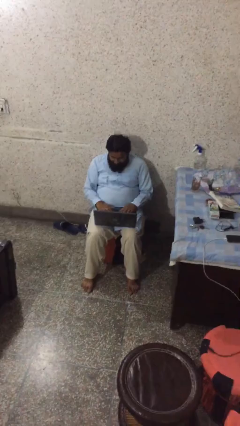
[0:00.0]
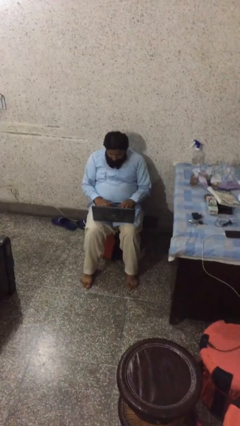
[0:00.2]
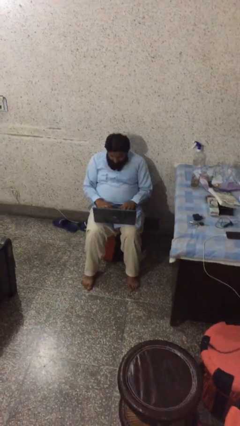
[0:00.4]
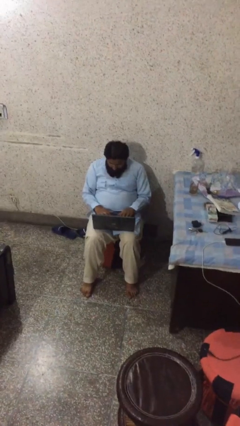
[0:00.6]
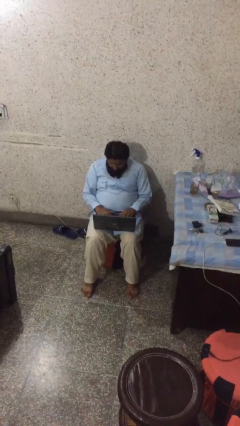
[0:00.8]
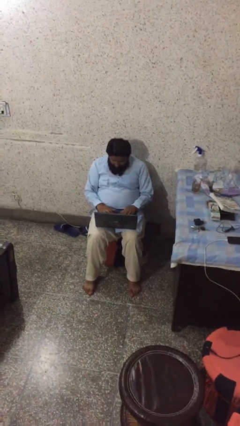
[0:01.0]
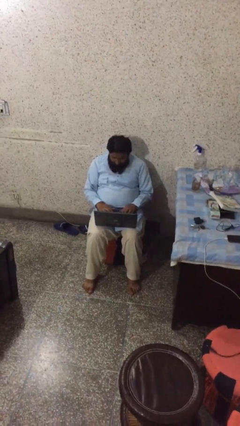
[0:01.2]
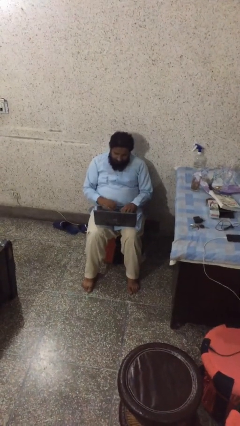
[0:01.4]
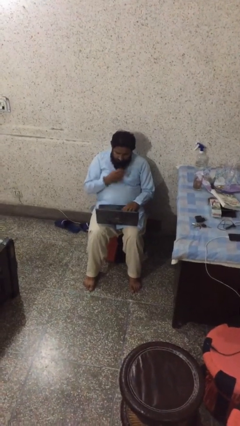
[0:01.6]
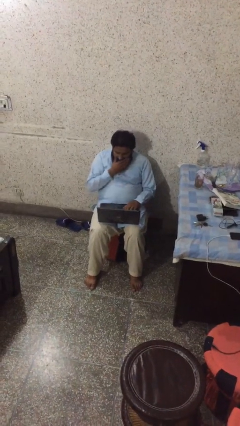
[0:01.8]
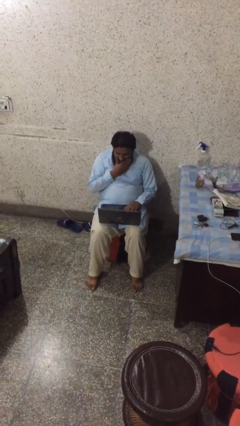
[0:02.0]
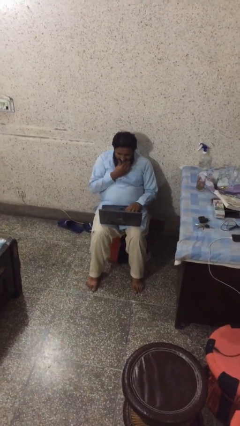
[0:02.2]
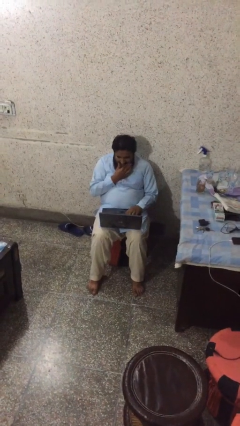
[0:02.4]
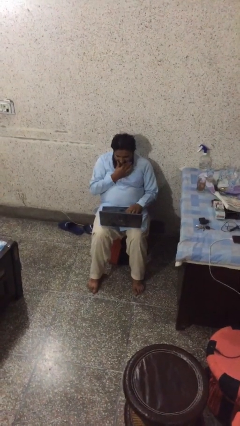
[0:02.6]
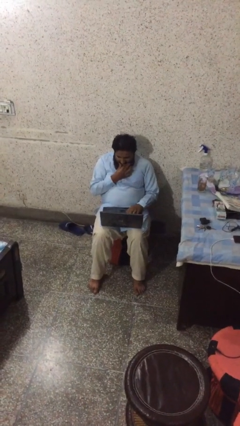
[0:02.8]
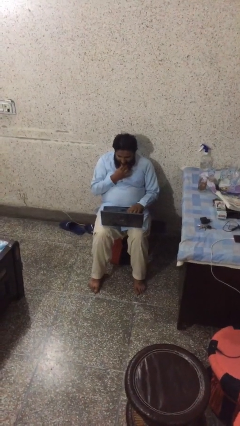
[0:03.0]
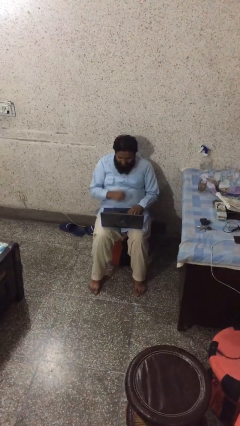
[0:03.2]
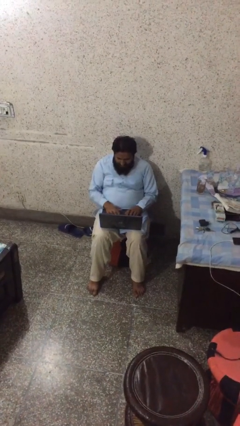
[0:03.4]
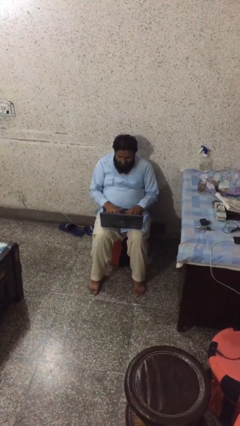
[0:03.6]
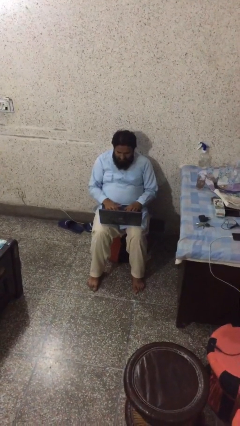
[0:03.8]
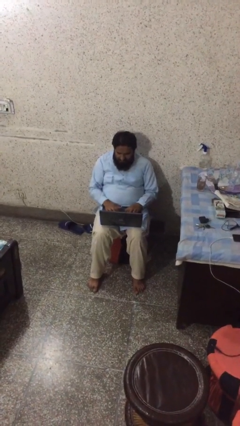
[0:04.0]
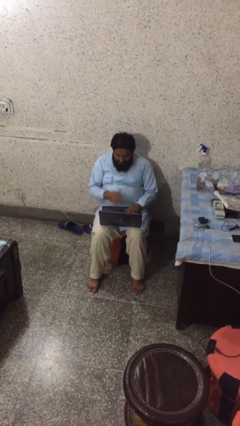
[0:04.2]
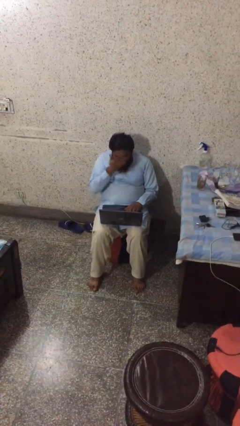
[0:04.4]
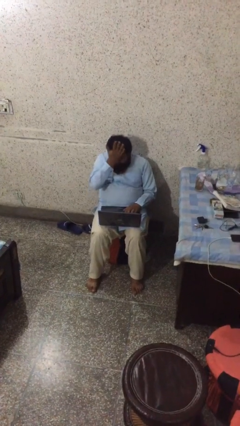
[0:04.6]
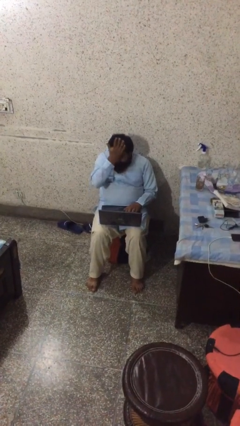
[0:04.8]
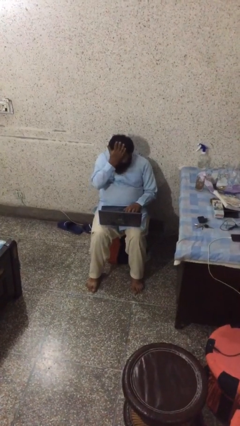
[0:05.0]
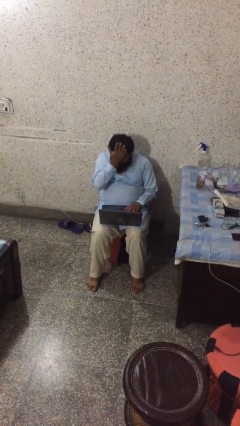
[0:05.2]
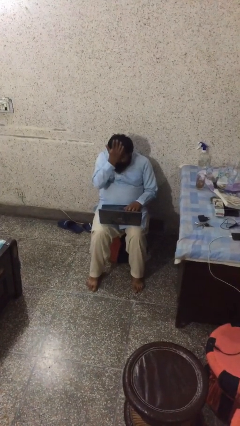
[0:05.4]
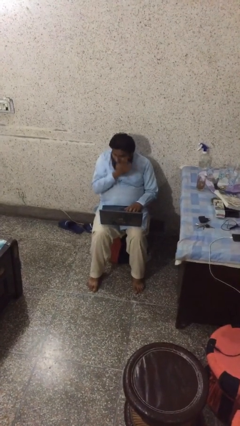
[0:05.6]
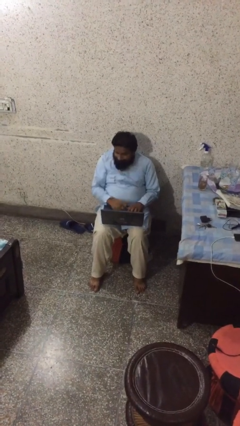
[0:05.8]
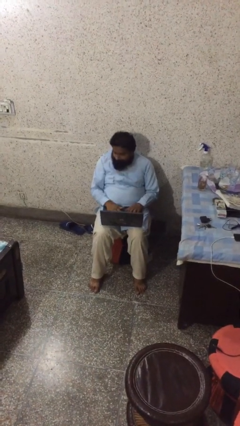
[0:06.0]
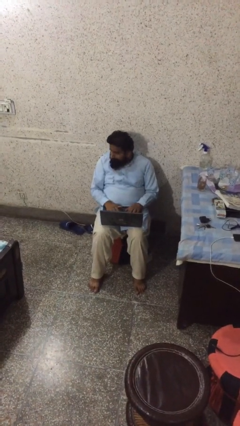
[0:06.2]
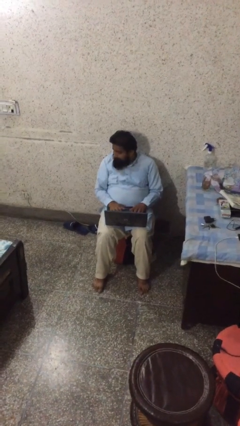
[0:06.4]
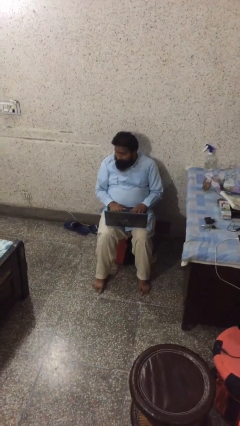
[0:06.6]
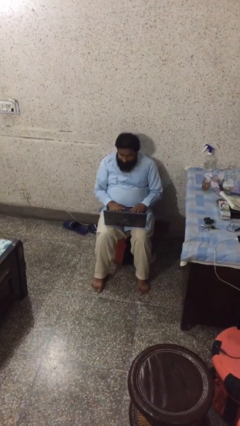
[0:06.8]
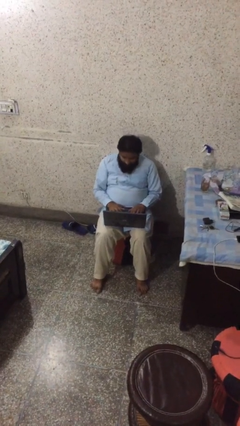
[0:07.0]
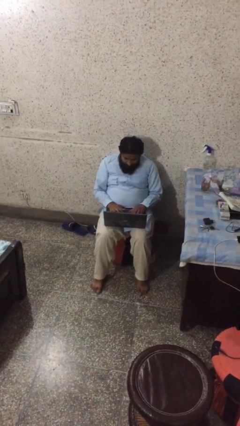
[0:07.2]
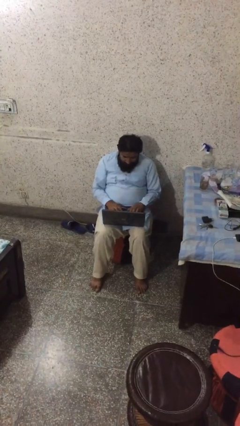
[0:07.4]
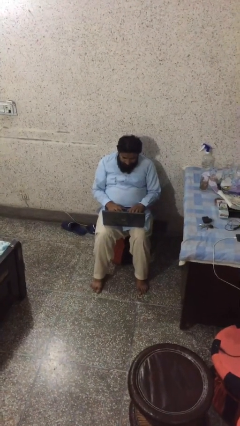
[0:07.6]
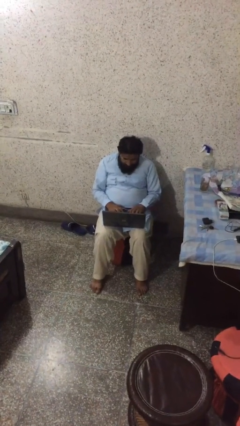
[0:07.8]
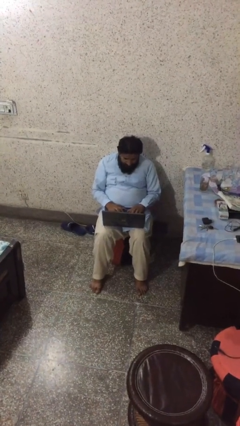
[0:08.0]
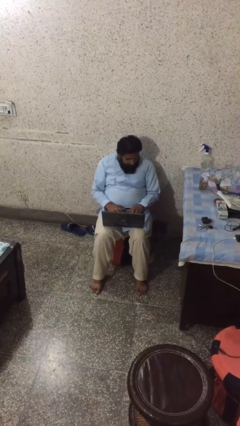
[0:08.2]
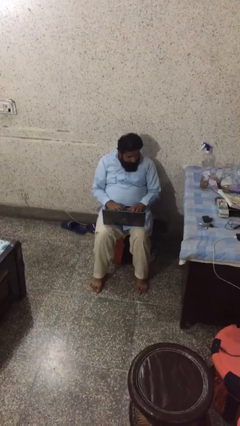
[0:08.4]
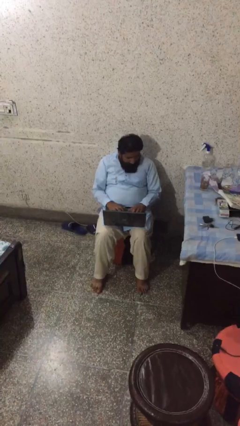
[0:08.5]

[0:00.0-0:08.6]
person interacts with laptop

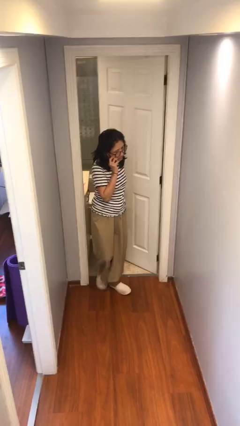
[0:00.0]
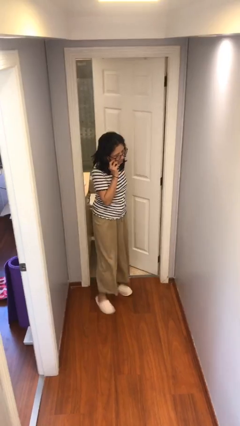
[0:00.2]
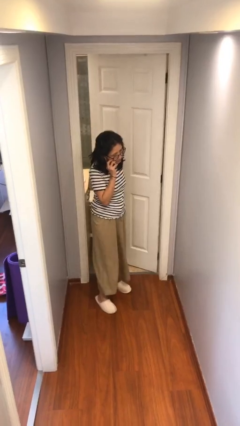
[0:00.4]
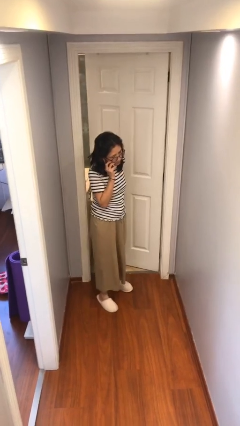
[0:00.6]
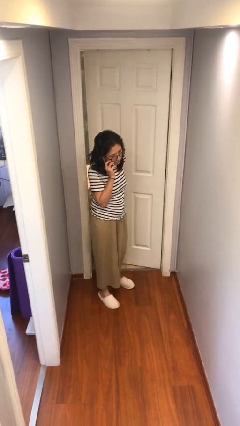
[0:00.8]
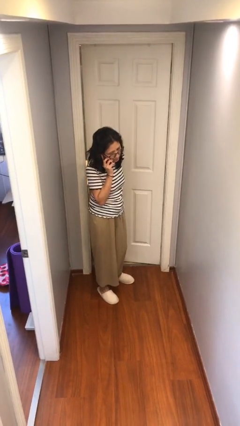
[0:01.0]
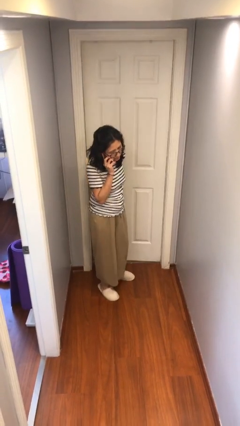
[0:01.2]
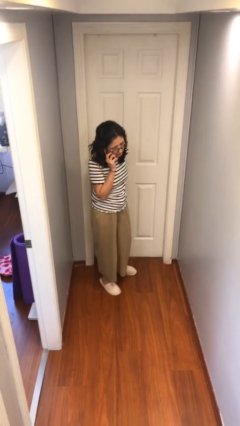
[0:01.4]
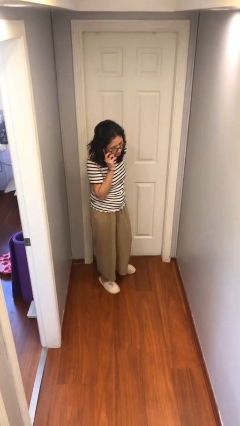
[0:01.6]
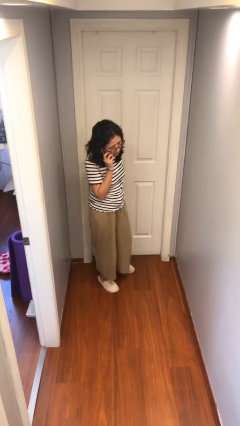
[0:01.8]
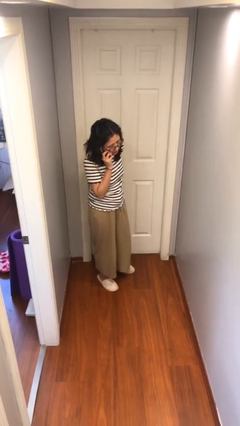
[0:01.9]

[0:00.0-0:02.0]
person closes facility door

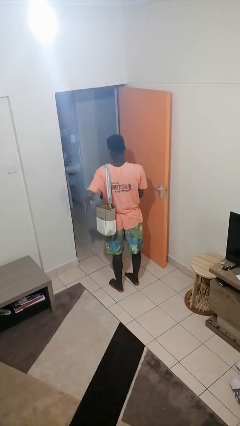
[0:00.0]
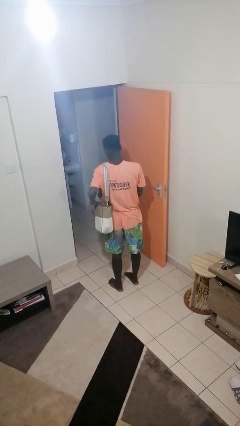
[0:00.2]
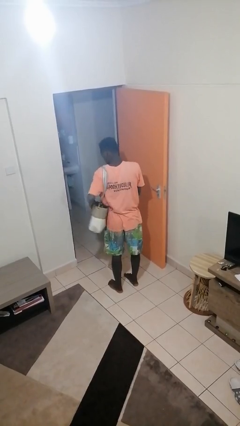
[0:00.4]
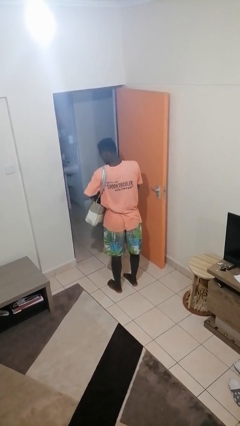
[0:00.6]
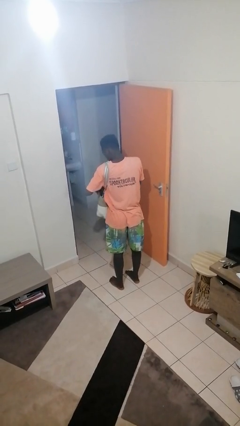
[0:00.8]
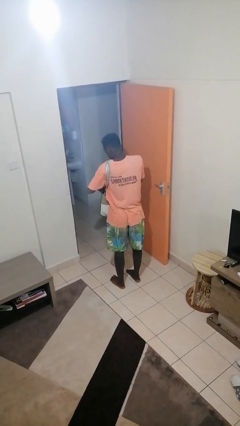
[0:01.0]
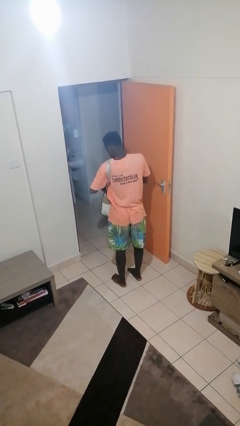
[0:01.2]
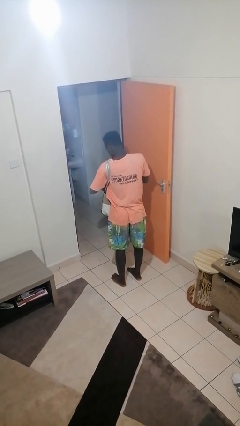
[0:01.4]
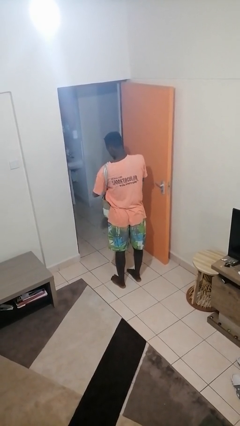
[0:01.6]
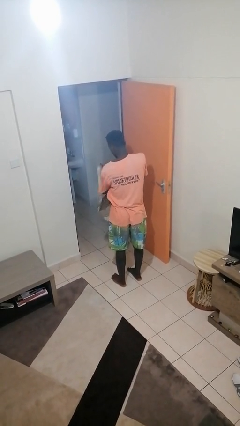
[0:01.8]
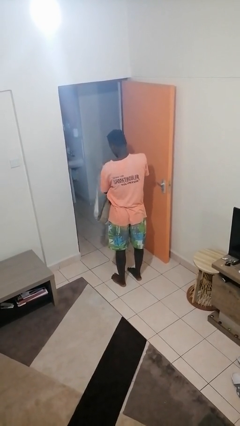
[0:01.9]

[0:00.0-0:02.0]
person puts object into purse

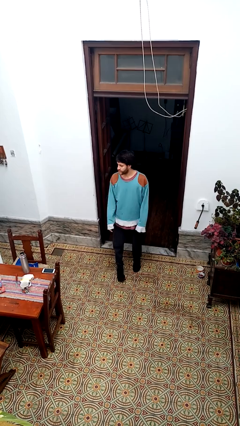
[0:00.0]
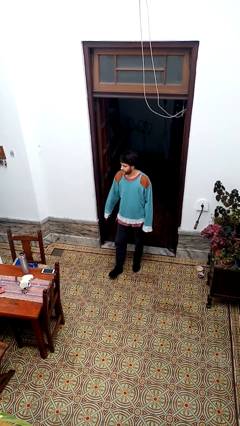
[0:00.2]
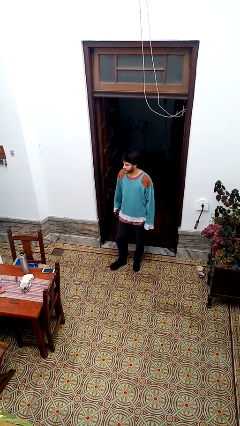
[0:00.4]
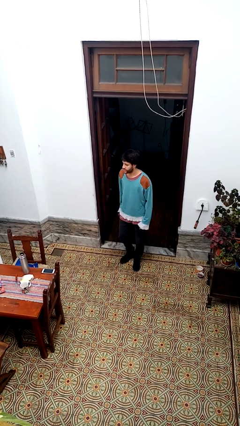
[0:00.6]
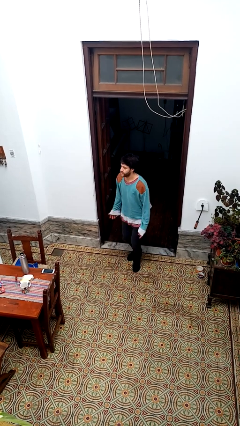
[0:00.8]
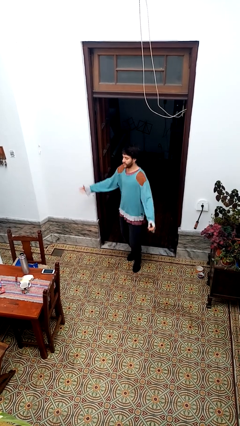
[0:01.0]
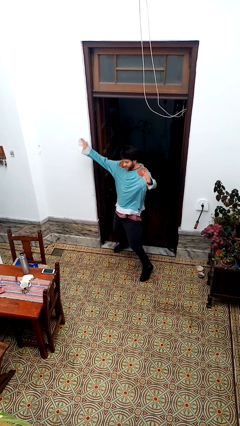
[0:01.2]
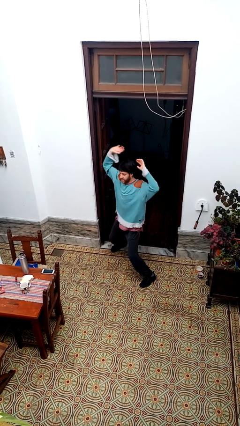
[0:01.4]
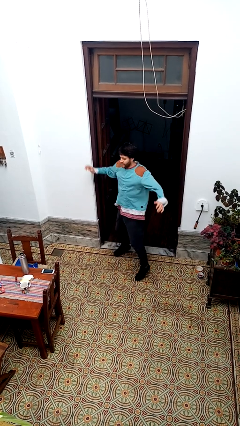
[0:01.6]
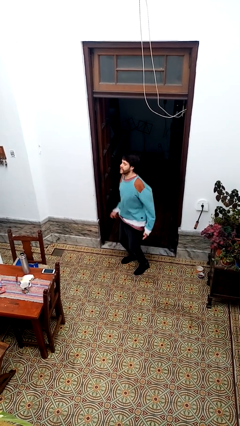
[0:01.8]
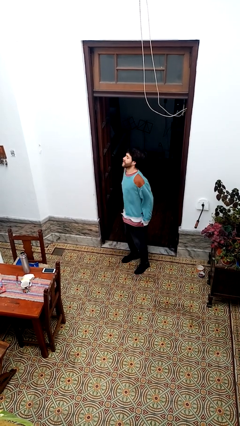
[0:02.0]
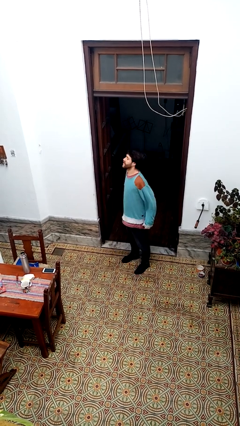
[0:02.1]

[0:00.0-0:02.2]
person exercises with jumping jacks

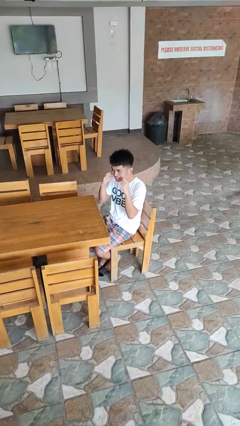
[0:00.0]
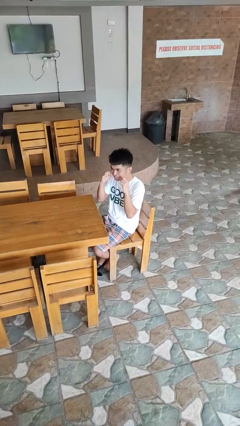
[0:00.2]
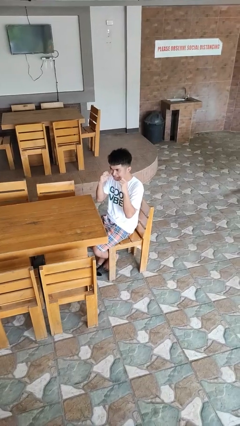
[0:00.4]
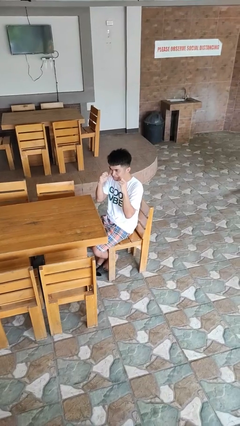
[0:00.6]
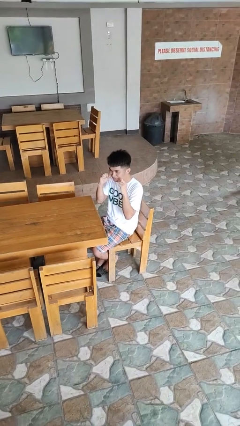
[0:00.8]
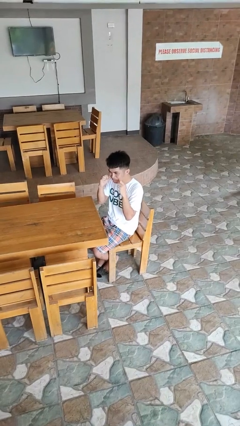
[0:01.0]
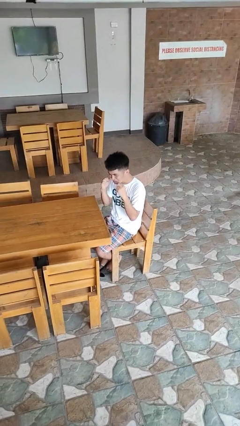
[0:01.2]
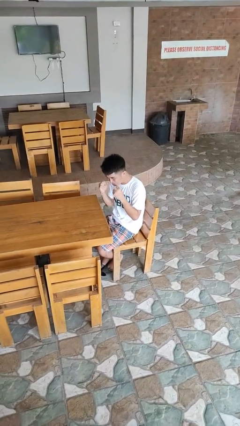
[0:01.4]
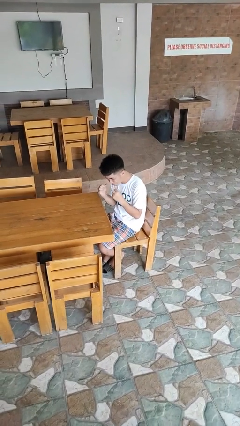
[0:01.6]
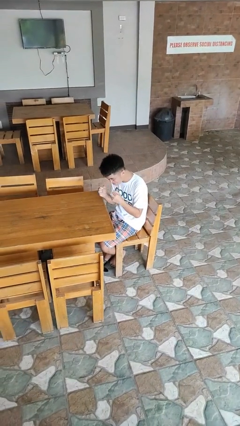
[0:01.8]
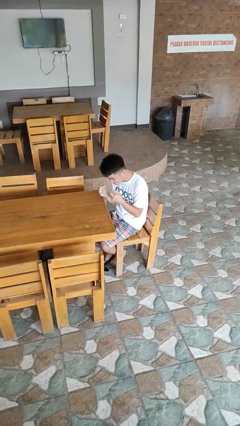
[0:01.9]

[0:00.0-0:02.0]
person flosses

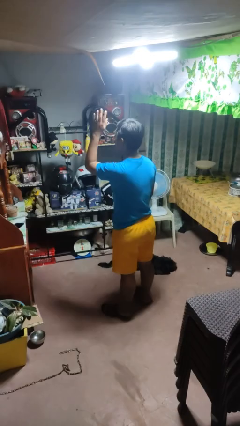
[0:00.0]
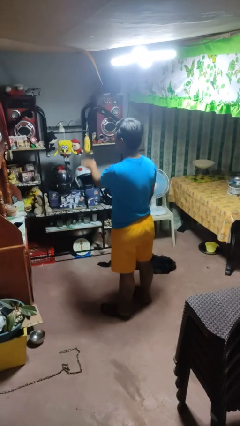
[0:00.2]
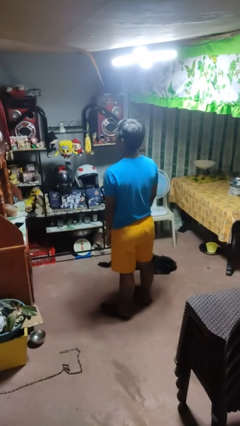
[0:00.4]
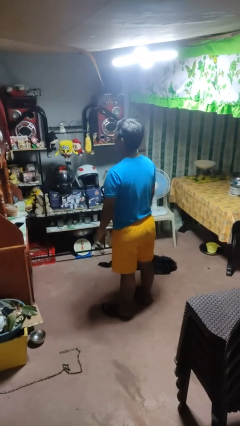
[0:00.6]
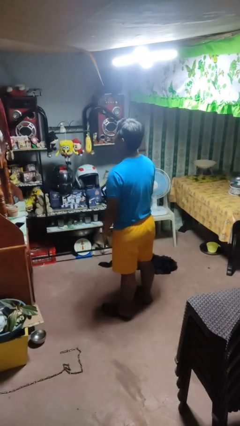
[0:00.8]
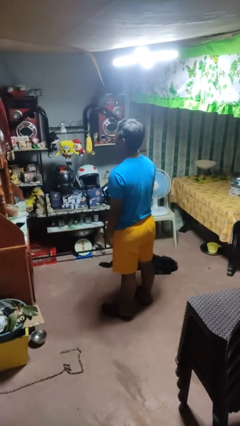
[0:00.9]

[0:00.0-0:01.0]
person gestures swipe down
